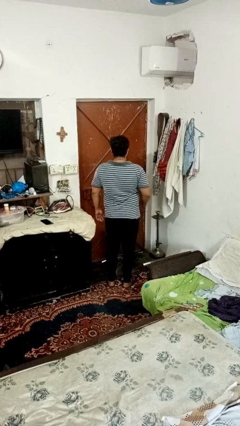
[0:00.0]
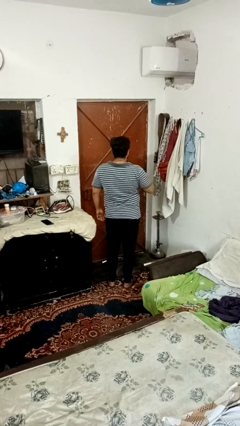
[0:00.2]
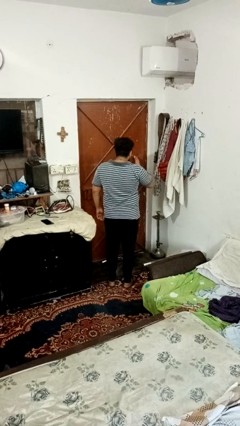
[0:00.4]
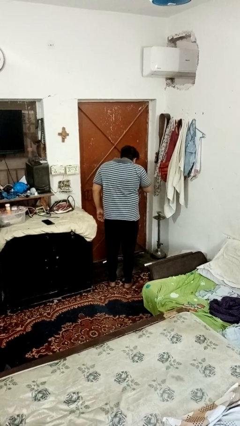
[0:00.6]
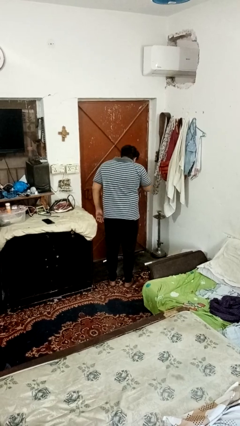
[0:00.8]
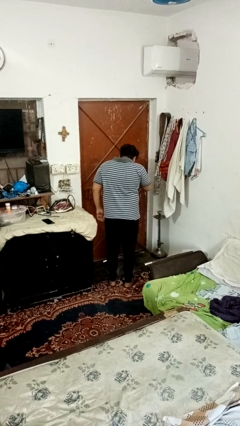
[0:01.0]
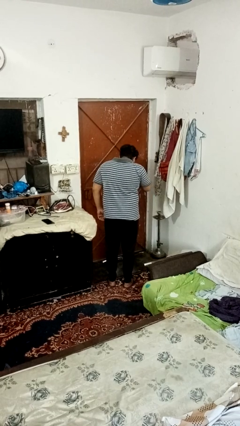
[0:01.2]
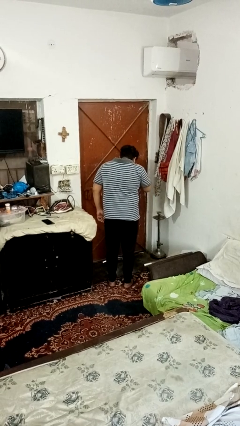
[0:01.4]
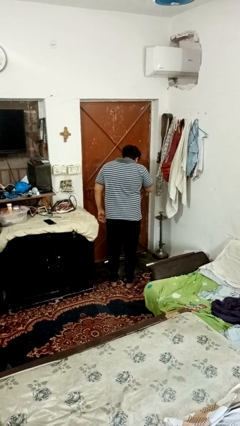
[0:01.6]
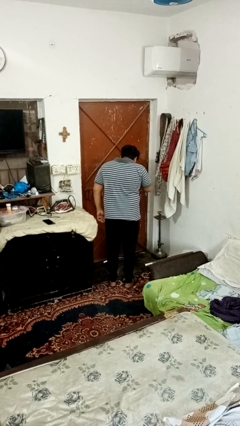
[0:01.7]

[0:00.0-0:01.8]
person sneezes into hand

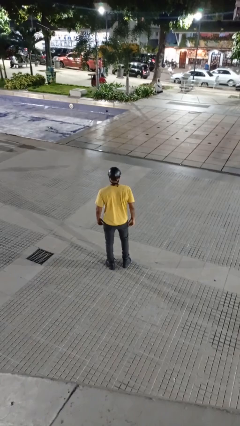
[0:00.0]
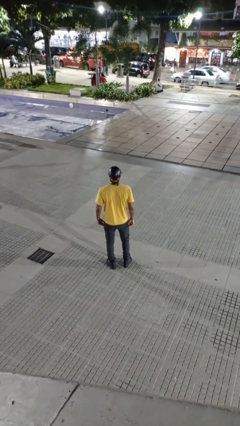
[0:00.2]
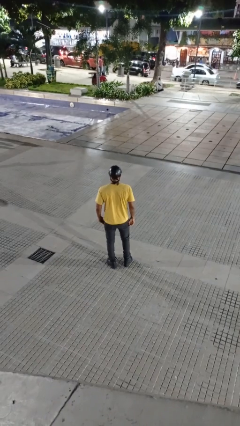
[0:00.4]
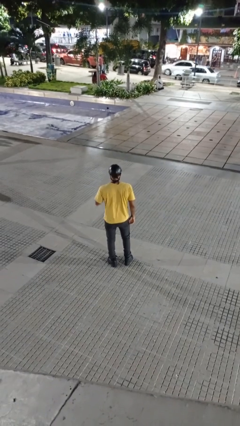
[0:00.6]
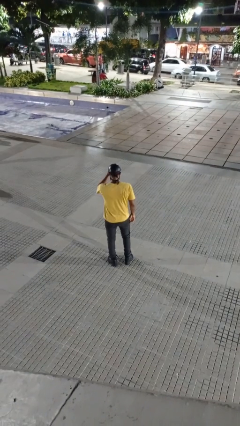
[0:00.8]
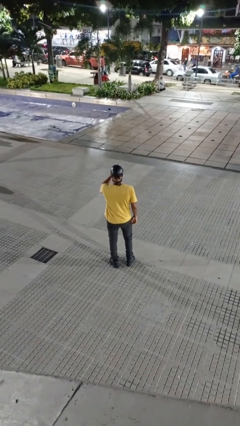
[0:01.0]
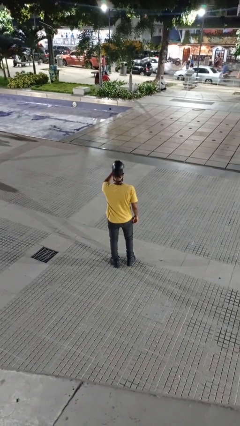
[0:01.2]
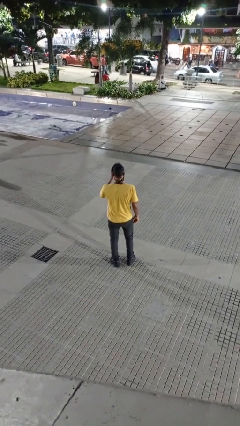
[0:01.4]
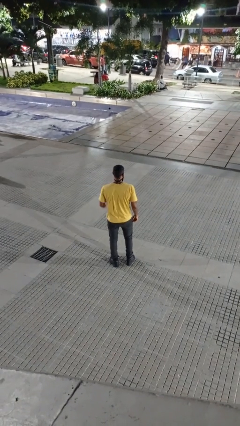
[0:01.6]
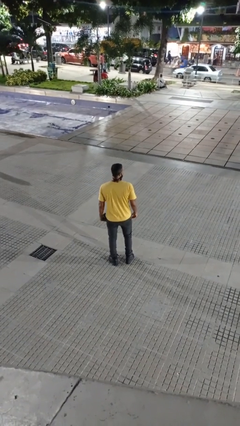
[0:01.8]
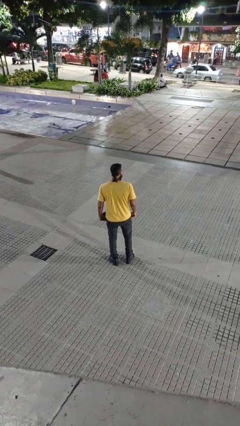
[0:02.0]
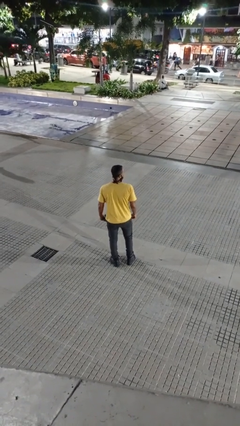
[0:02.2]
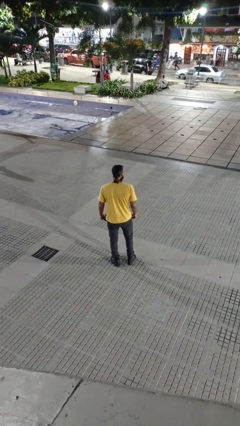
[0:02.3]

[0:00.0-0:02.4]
person takes off hat

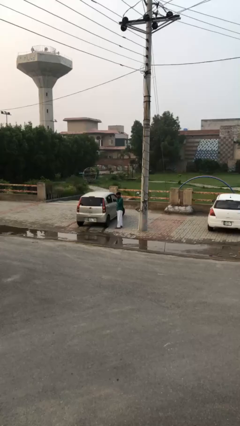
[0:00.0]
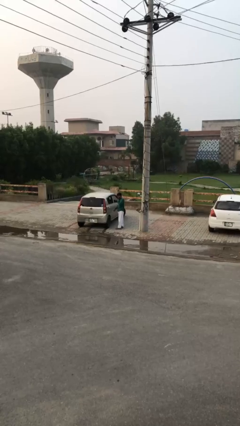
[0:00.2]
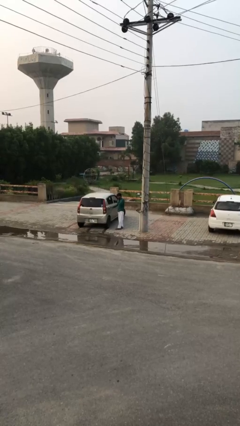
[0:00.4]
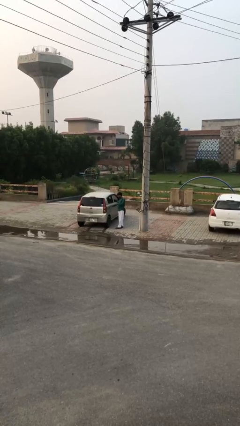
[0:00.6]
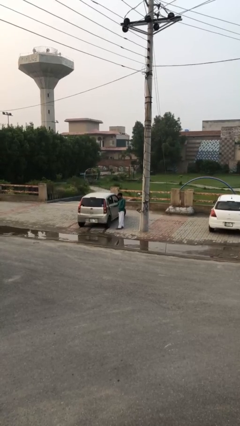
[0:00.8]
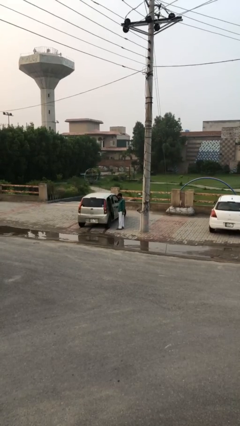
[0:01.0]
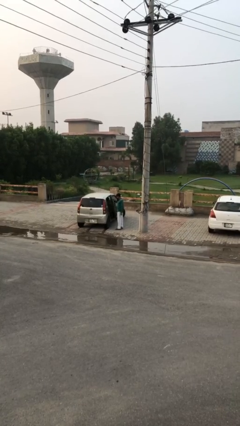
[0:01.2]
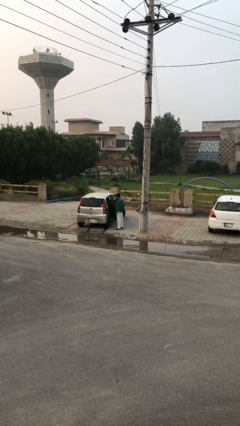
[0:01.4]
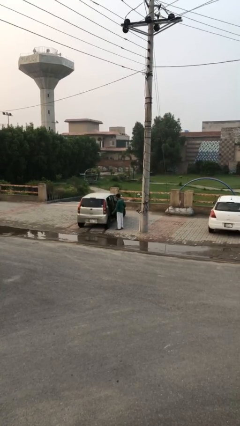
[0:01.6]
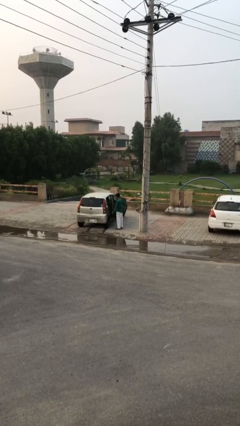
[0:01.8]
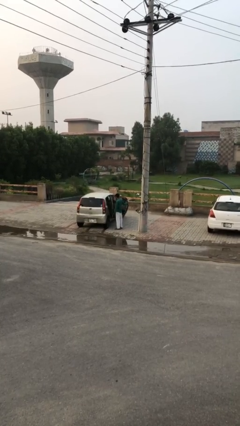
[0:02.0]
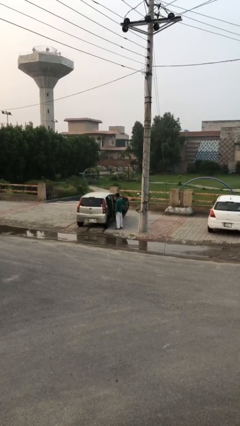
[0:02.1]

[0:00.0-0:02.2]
person opens car door

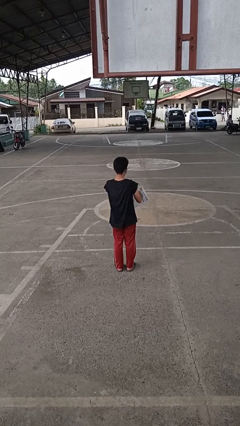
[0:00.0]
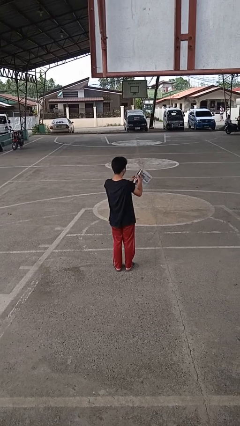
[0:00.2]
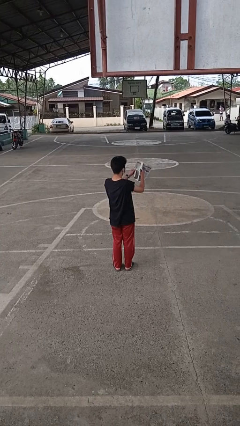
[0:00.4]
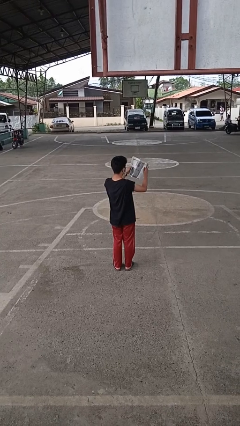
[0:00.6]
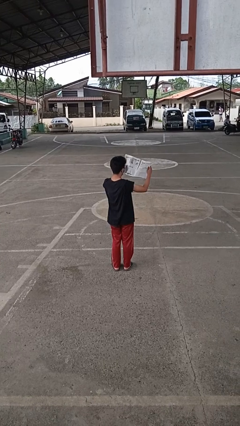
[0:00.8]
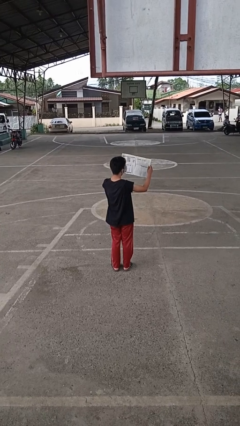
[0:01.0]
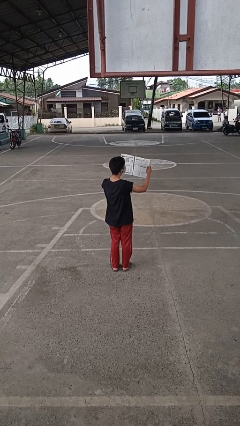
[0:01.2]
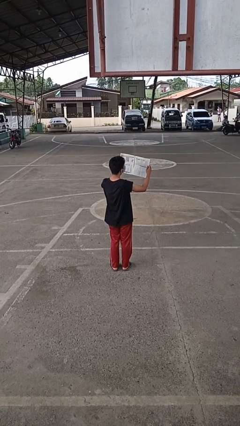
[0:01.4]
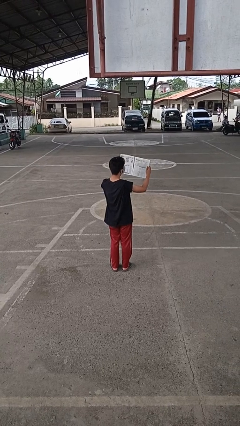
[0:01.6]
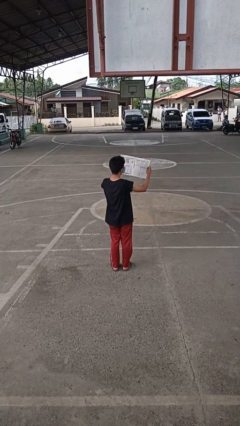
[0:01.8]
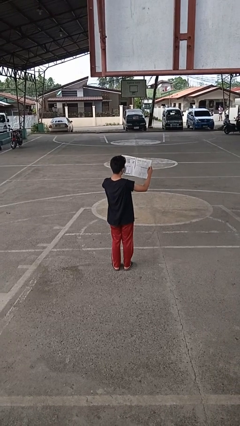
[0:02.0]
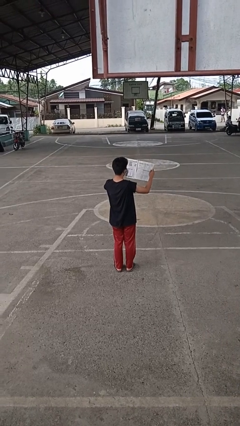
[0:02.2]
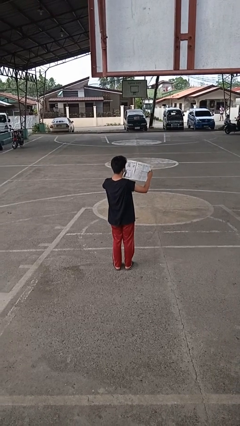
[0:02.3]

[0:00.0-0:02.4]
person reads newspaper

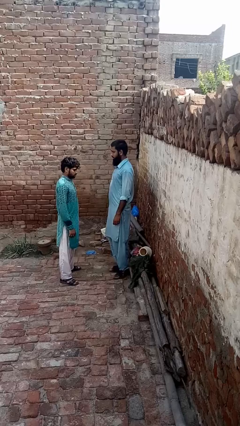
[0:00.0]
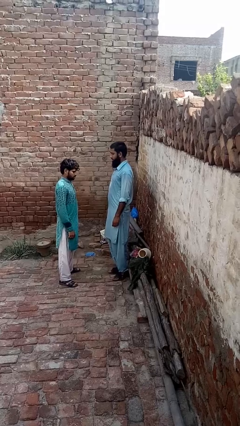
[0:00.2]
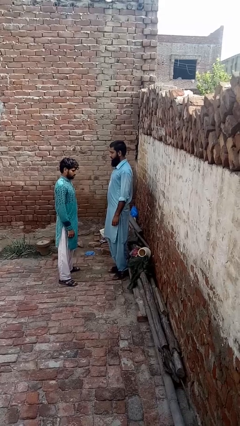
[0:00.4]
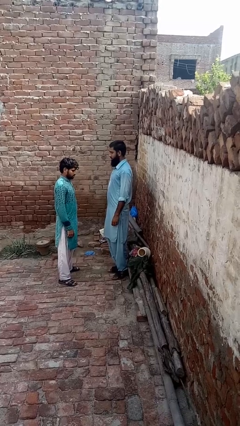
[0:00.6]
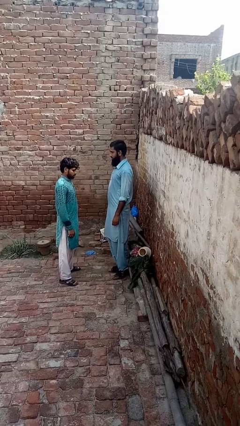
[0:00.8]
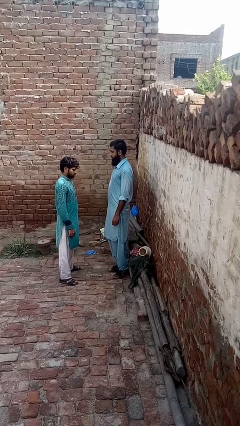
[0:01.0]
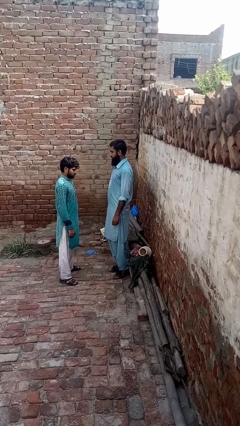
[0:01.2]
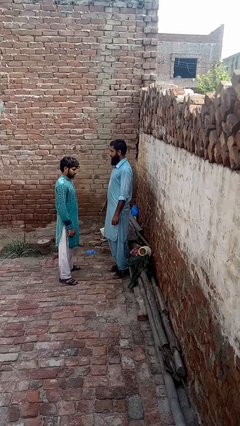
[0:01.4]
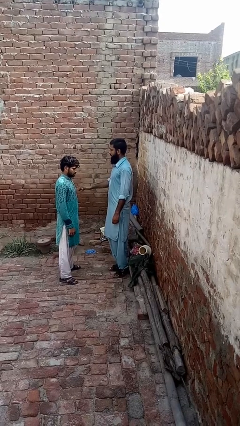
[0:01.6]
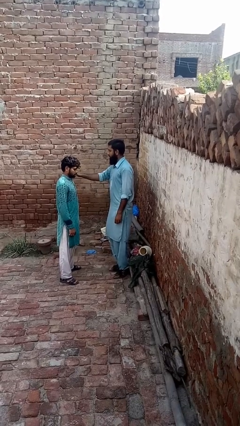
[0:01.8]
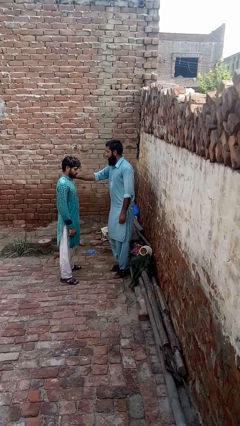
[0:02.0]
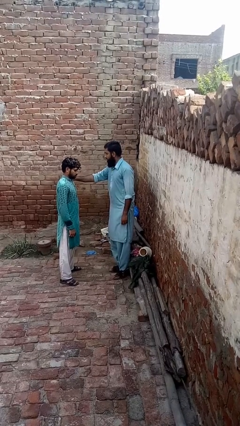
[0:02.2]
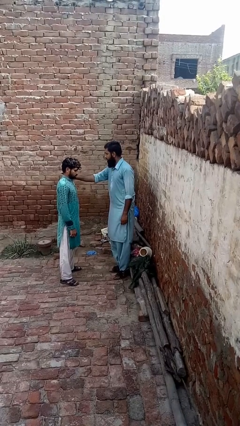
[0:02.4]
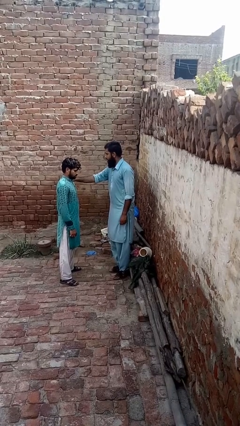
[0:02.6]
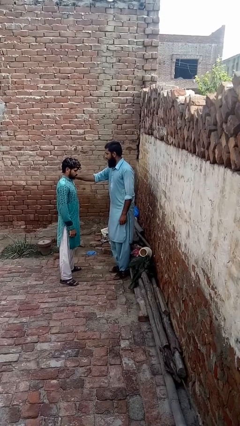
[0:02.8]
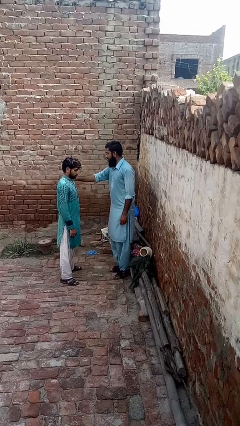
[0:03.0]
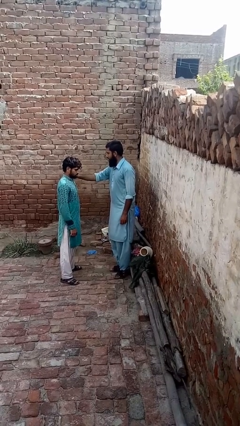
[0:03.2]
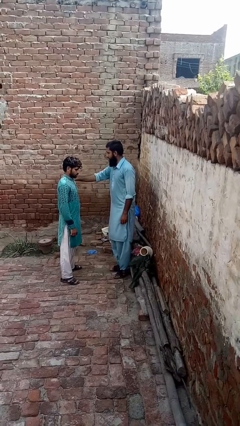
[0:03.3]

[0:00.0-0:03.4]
person pounds shoulders of person

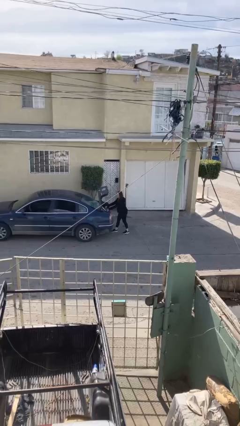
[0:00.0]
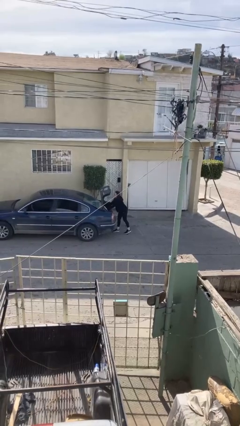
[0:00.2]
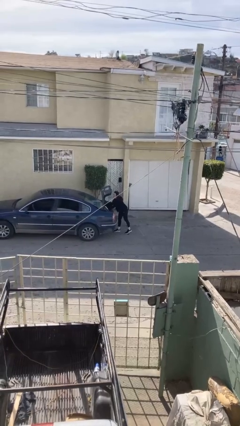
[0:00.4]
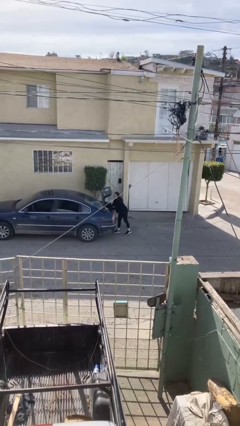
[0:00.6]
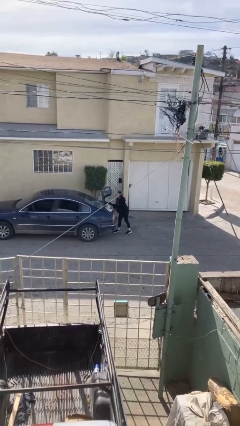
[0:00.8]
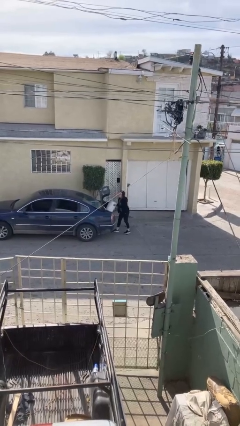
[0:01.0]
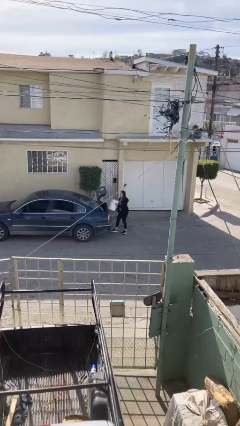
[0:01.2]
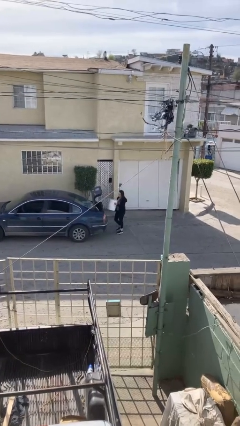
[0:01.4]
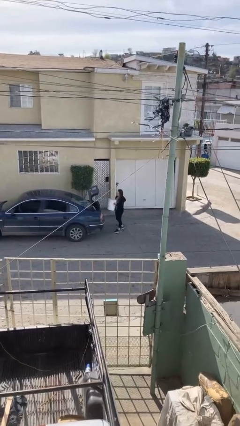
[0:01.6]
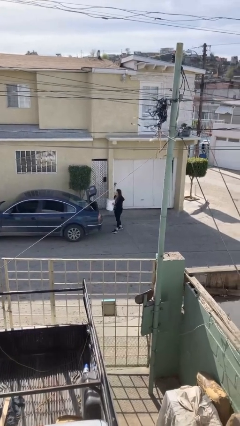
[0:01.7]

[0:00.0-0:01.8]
person unloads car

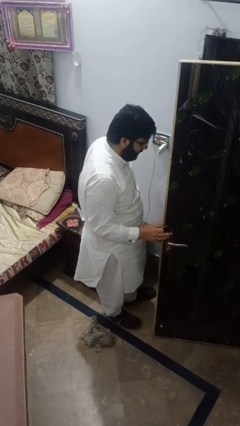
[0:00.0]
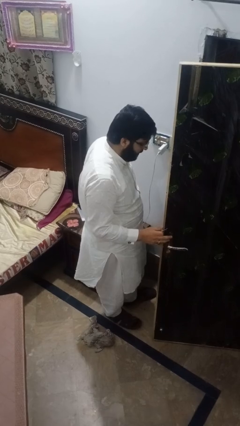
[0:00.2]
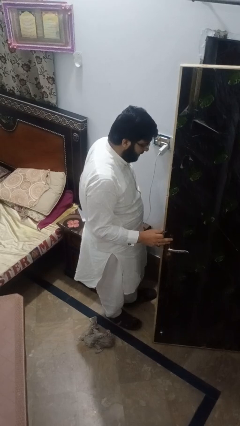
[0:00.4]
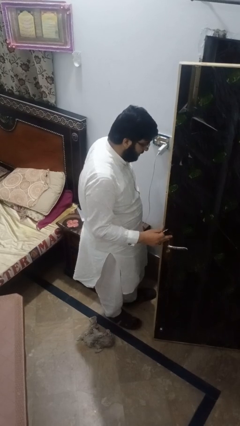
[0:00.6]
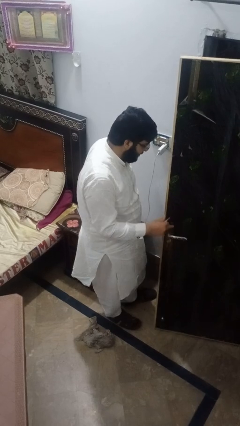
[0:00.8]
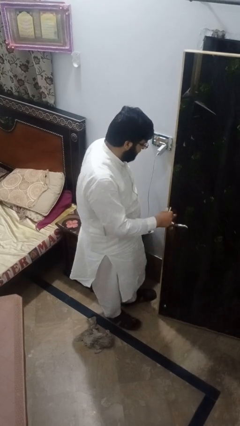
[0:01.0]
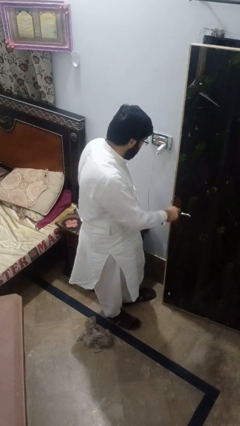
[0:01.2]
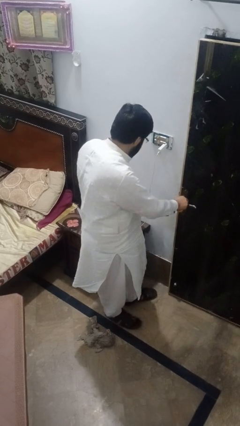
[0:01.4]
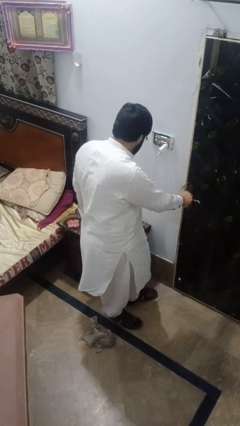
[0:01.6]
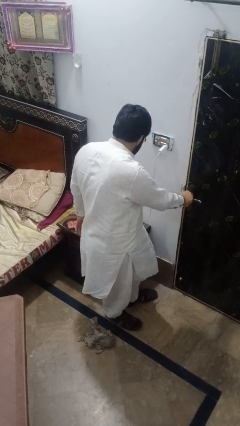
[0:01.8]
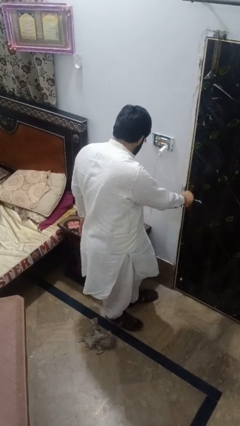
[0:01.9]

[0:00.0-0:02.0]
person closes facility door

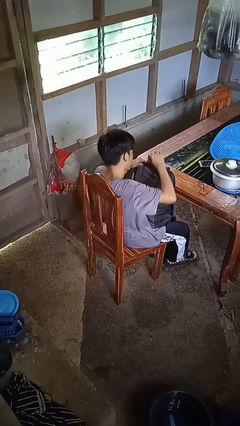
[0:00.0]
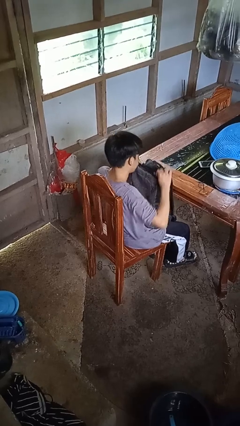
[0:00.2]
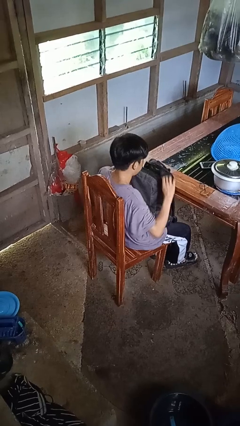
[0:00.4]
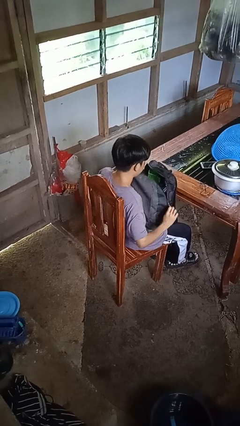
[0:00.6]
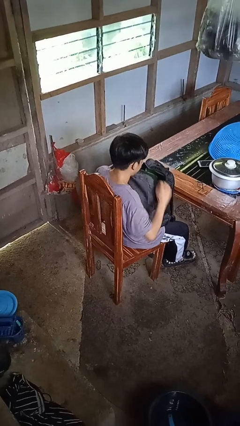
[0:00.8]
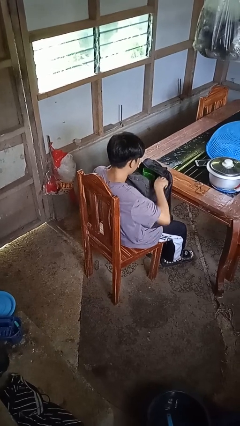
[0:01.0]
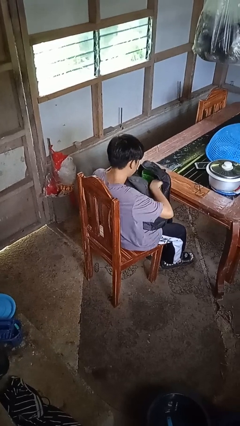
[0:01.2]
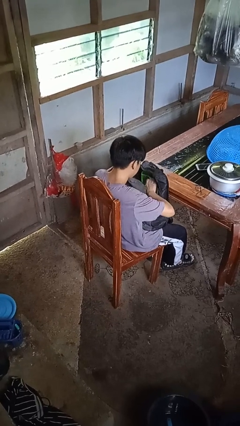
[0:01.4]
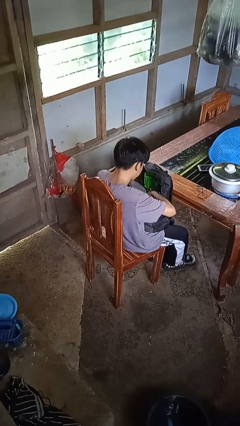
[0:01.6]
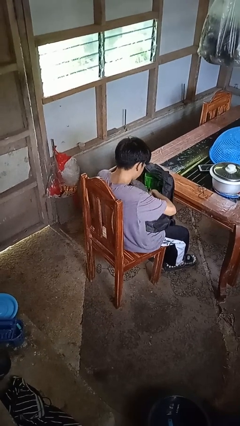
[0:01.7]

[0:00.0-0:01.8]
person searches in backpack
